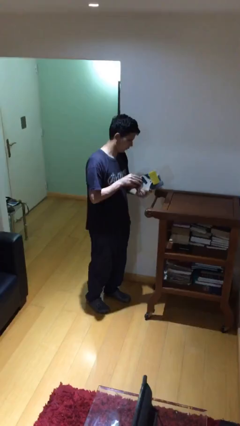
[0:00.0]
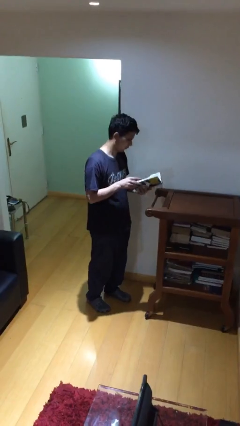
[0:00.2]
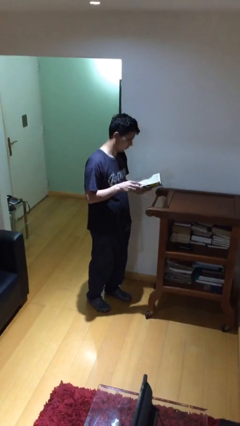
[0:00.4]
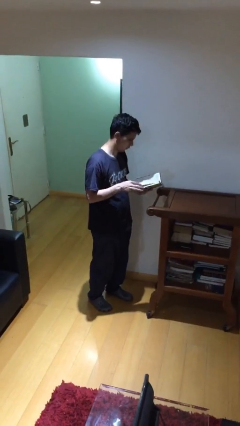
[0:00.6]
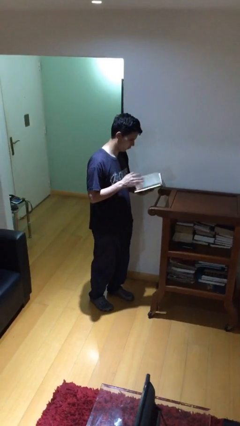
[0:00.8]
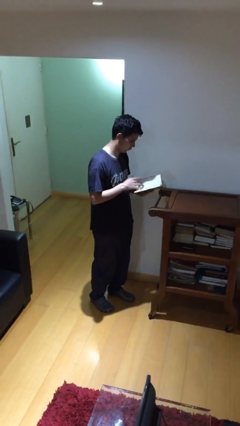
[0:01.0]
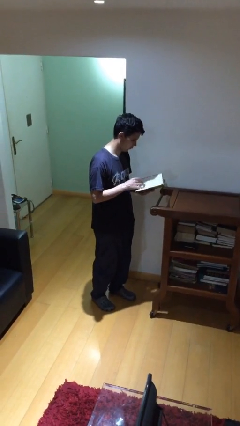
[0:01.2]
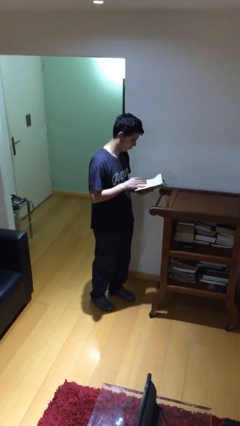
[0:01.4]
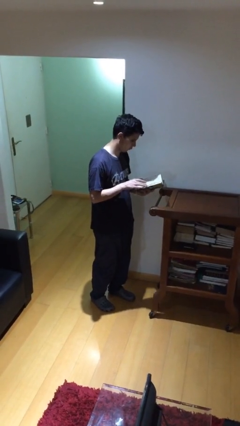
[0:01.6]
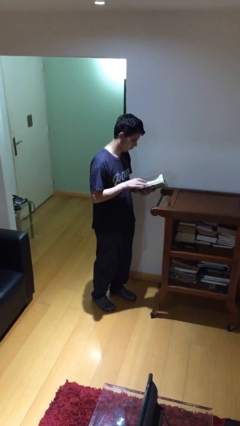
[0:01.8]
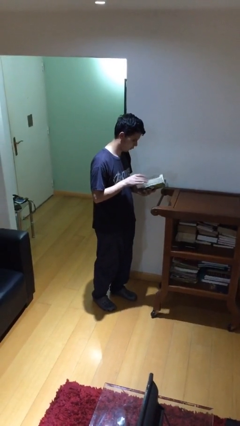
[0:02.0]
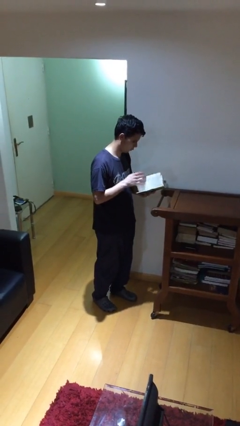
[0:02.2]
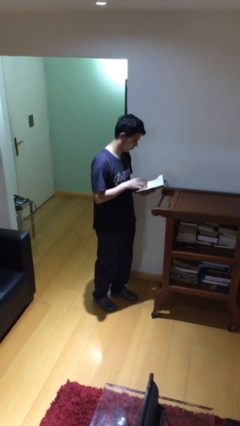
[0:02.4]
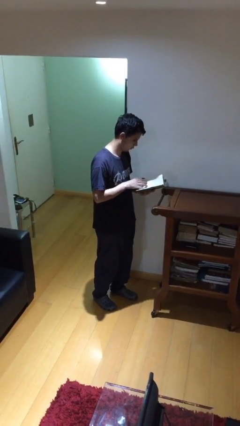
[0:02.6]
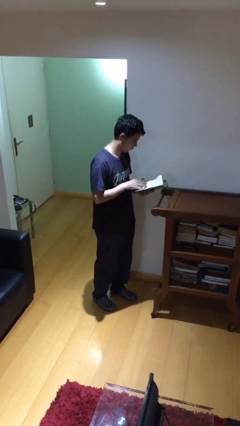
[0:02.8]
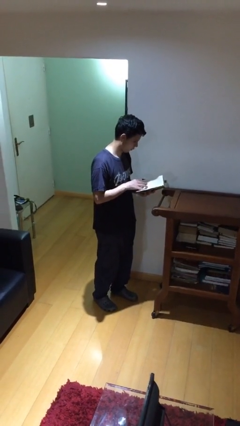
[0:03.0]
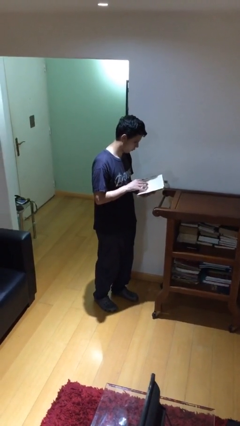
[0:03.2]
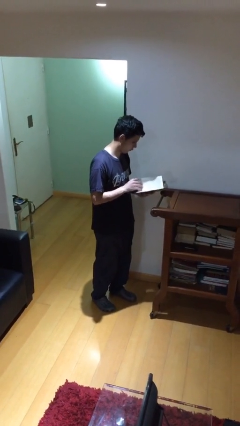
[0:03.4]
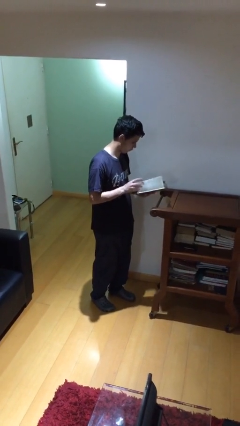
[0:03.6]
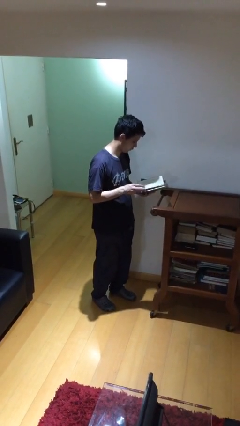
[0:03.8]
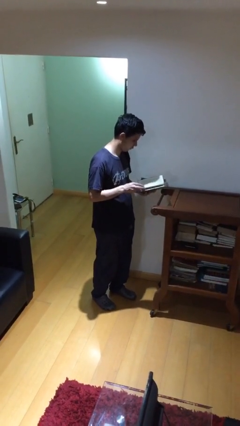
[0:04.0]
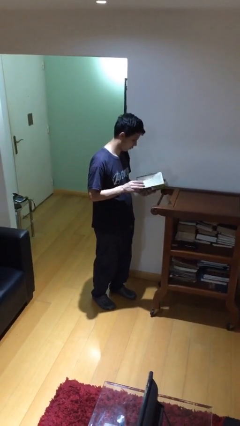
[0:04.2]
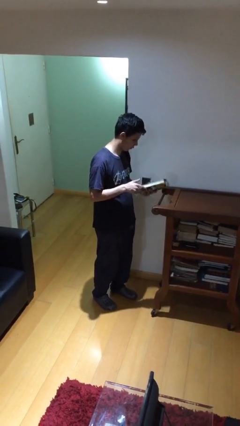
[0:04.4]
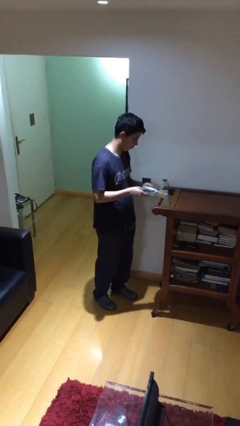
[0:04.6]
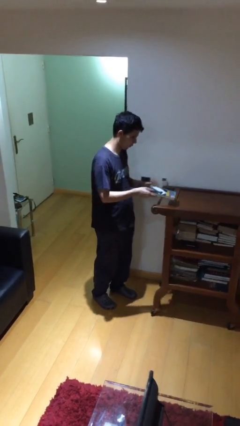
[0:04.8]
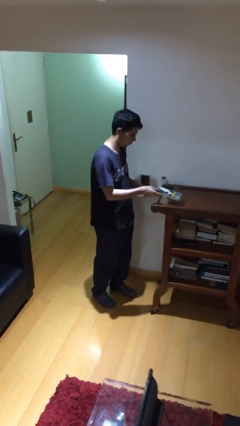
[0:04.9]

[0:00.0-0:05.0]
person reads document

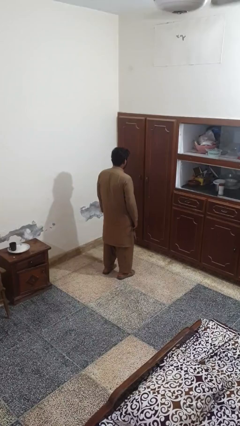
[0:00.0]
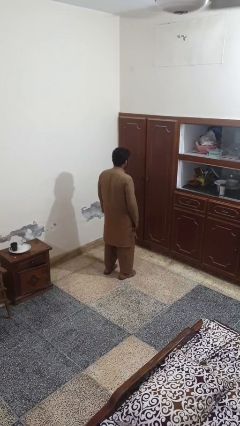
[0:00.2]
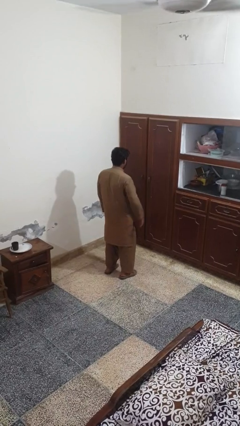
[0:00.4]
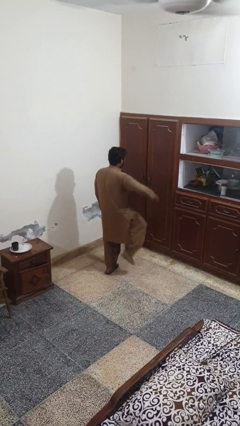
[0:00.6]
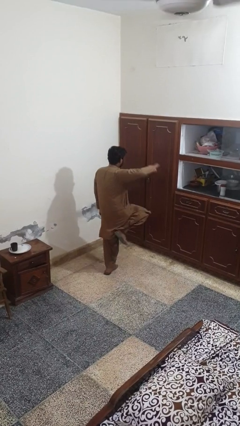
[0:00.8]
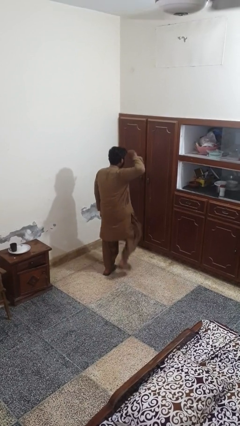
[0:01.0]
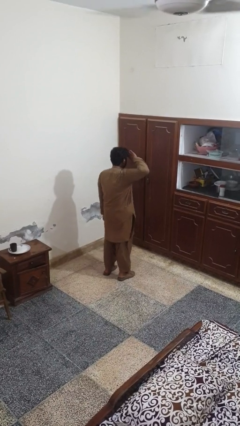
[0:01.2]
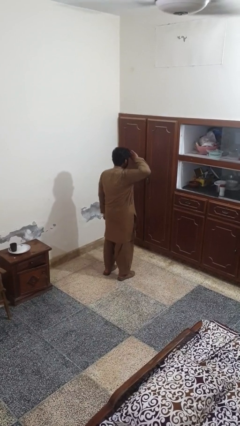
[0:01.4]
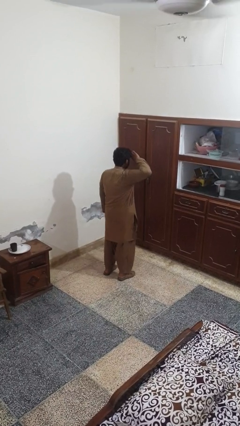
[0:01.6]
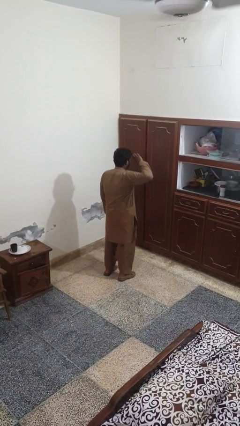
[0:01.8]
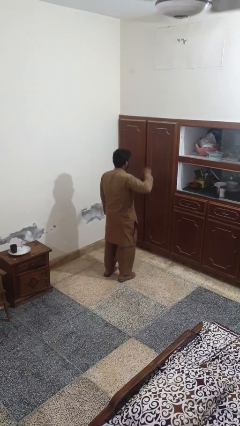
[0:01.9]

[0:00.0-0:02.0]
person salutes

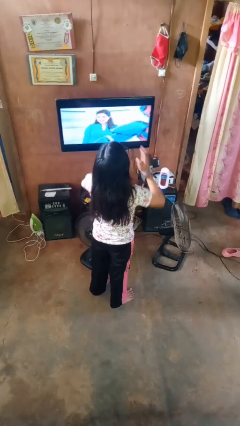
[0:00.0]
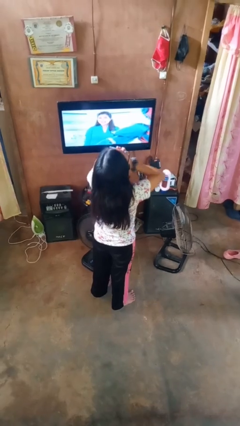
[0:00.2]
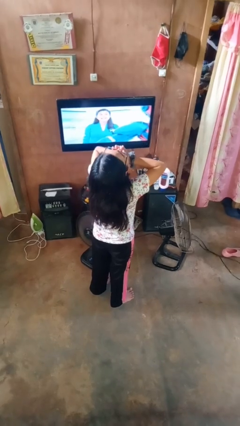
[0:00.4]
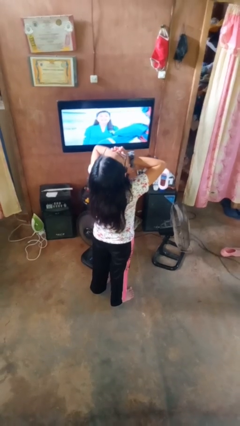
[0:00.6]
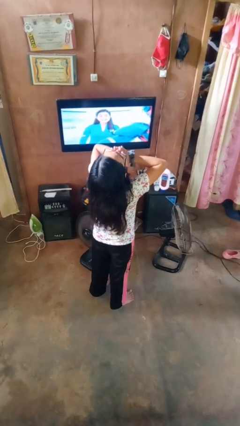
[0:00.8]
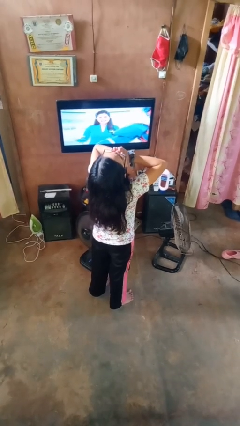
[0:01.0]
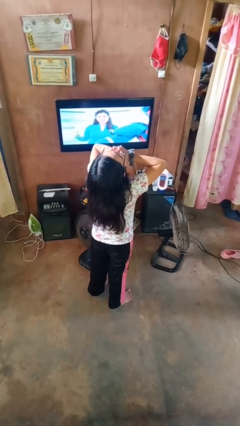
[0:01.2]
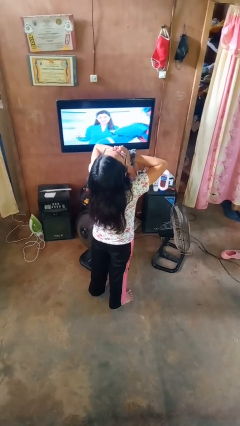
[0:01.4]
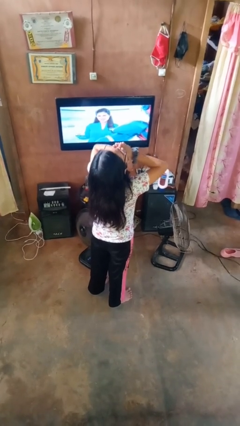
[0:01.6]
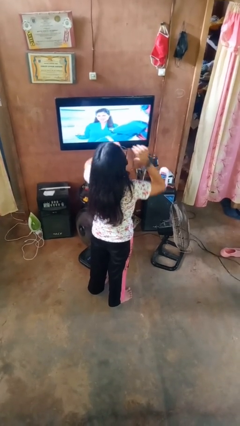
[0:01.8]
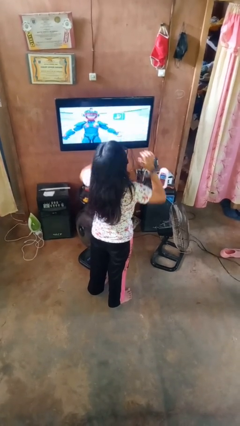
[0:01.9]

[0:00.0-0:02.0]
person yawns

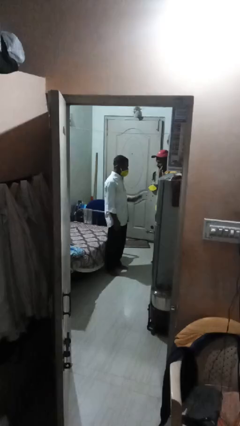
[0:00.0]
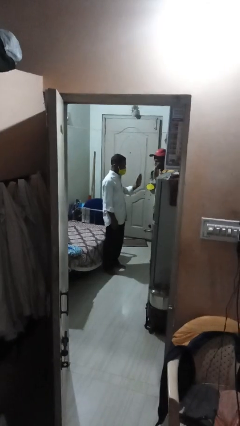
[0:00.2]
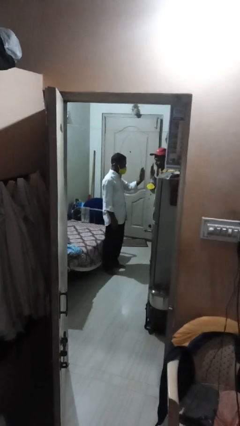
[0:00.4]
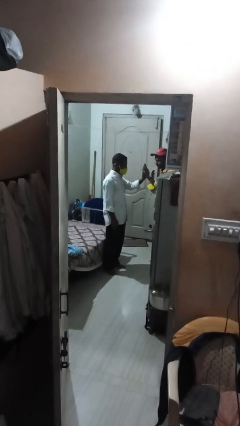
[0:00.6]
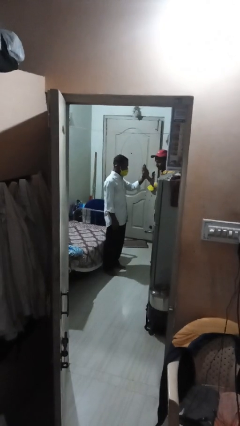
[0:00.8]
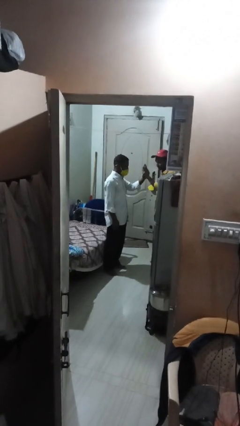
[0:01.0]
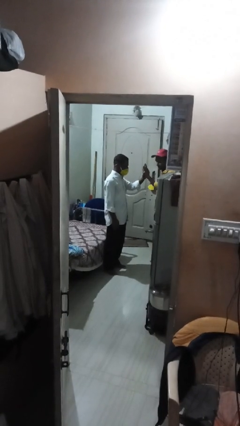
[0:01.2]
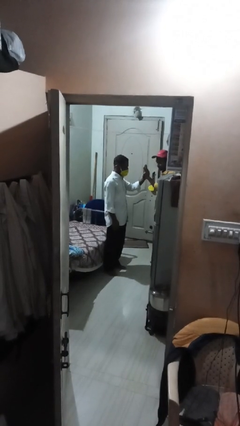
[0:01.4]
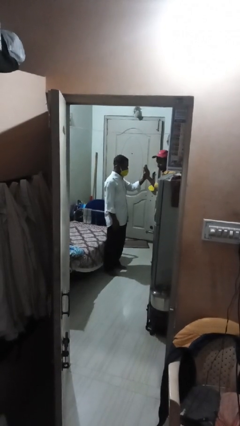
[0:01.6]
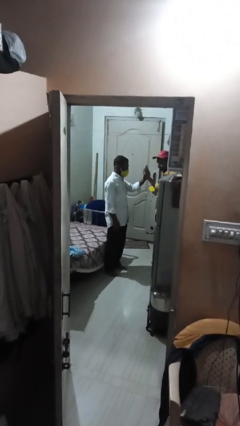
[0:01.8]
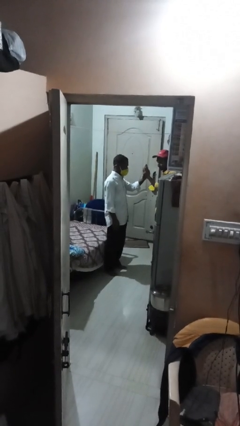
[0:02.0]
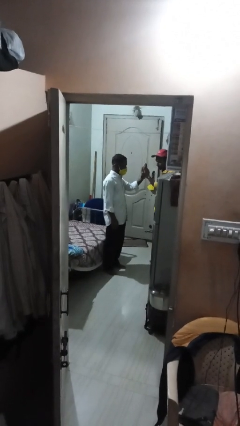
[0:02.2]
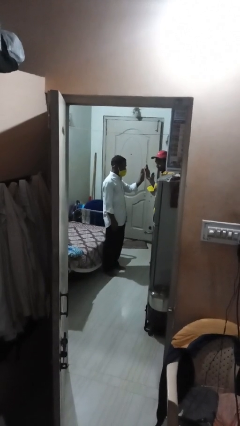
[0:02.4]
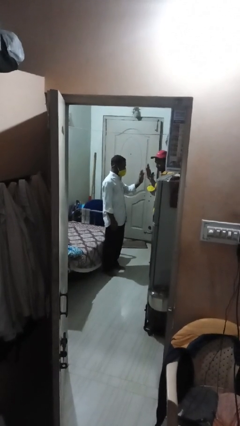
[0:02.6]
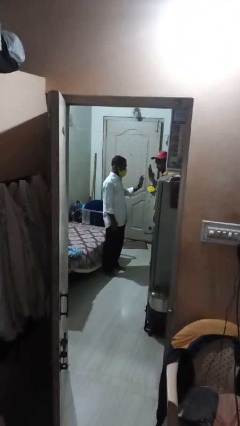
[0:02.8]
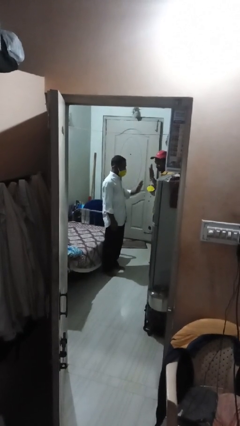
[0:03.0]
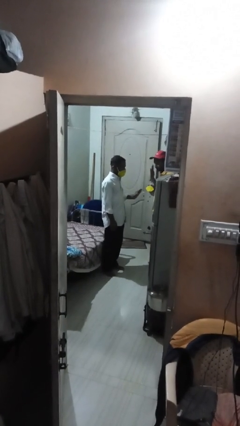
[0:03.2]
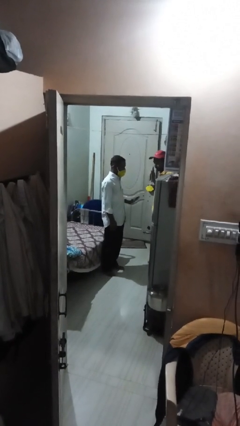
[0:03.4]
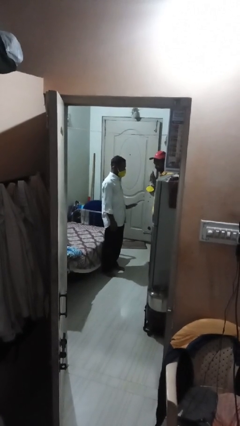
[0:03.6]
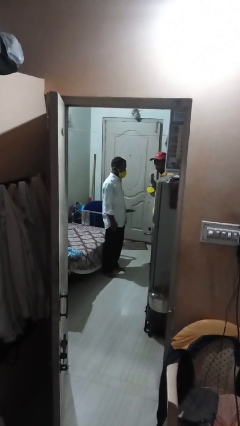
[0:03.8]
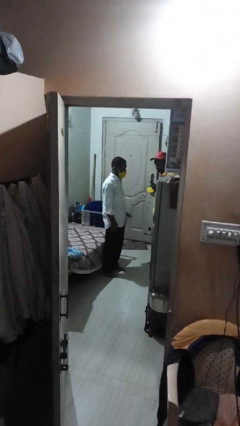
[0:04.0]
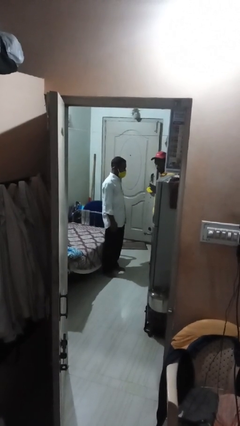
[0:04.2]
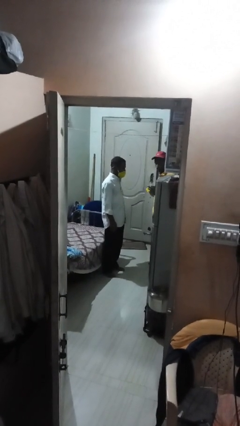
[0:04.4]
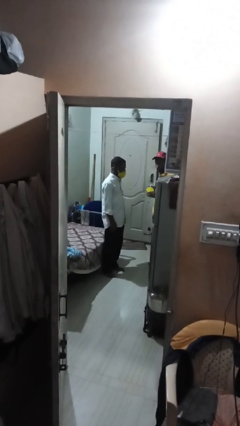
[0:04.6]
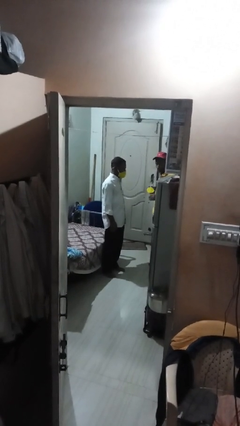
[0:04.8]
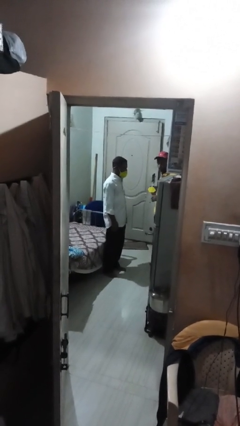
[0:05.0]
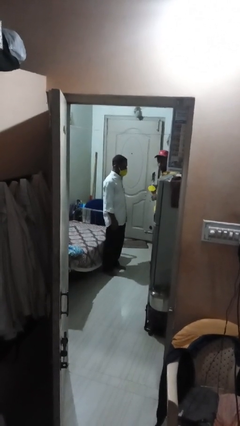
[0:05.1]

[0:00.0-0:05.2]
person highfives hand

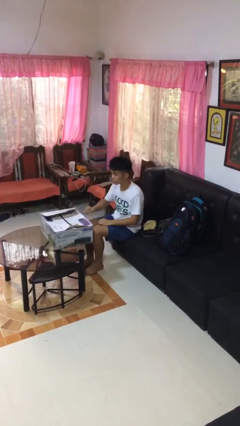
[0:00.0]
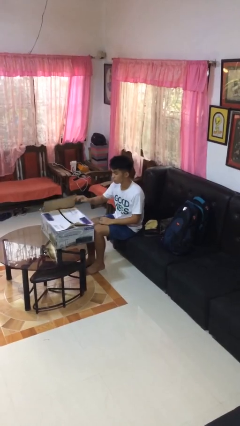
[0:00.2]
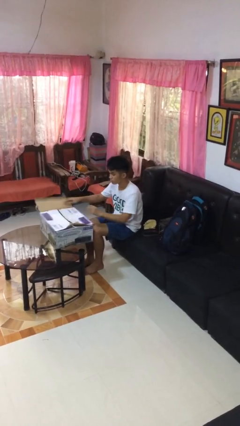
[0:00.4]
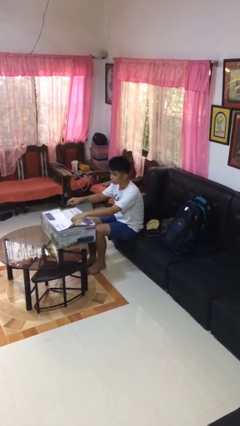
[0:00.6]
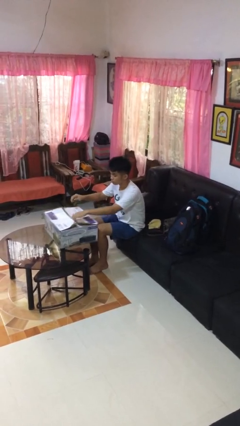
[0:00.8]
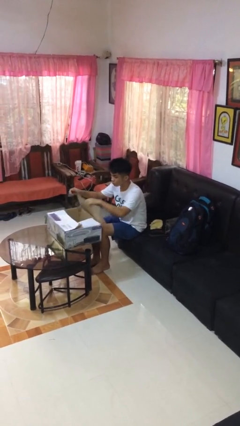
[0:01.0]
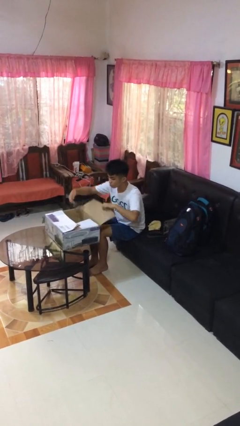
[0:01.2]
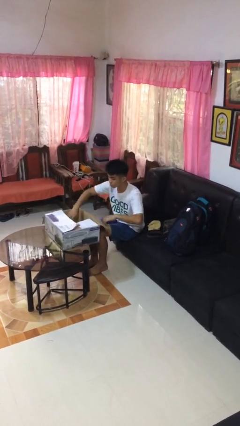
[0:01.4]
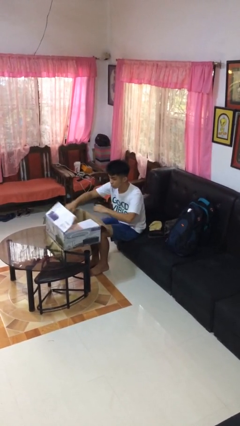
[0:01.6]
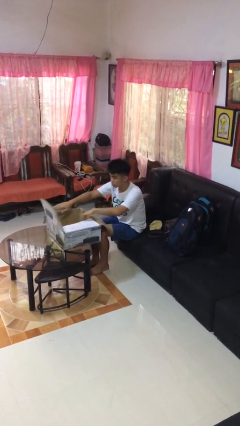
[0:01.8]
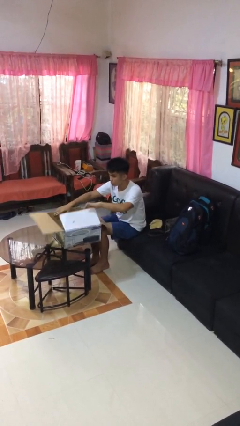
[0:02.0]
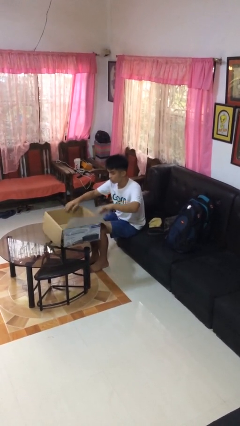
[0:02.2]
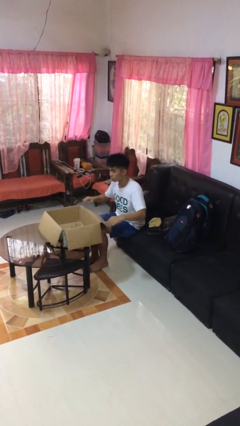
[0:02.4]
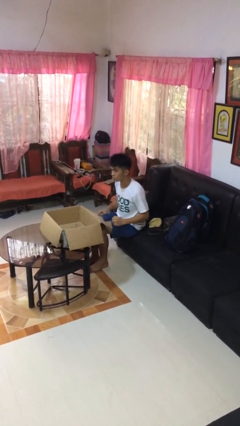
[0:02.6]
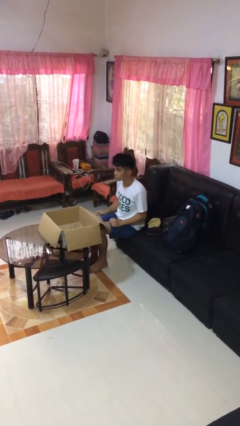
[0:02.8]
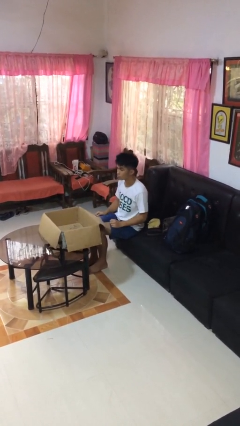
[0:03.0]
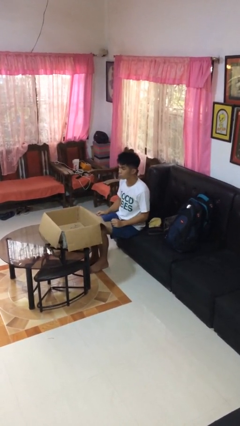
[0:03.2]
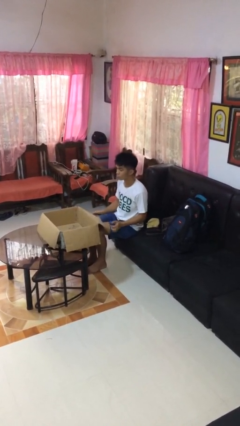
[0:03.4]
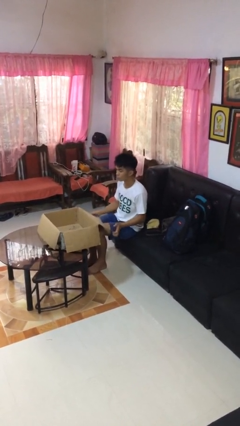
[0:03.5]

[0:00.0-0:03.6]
person opens box
